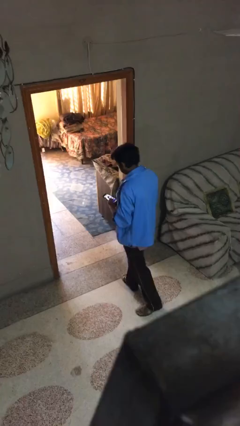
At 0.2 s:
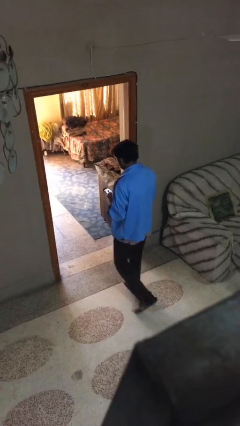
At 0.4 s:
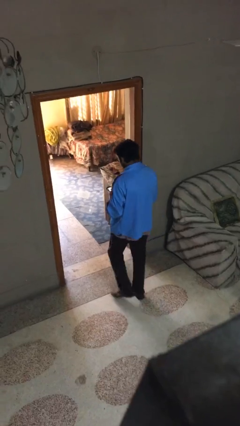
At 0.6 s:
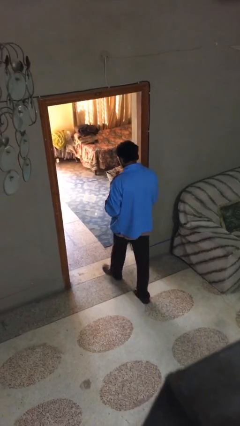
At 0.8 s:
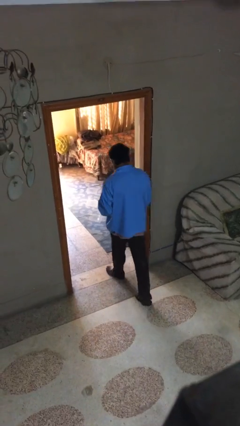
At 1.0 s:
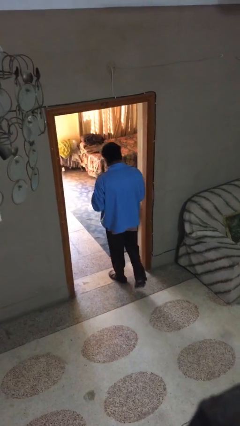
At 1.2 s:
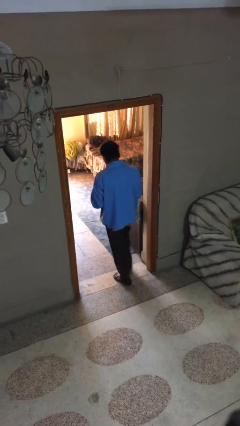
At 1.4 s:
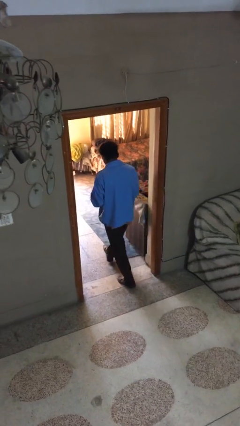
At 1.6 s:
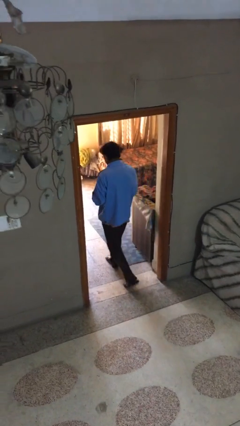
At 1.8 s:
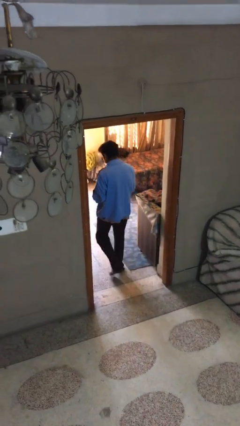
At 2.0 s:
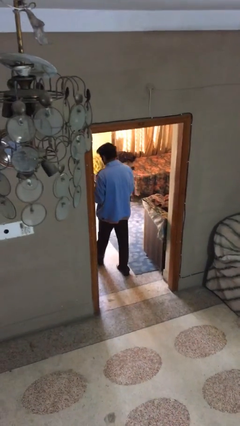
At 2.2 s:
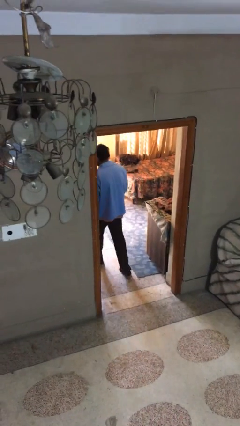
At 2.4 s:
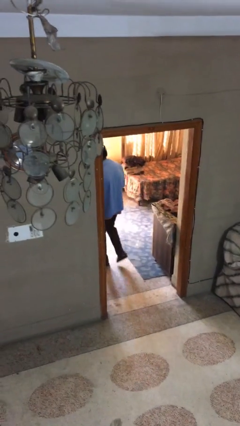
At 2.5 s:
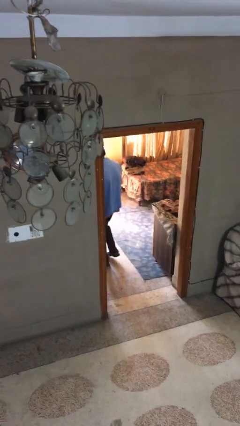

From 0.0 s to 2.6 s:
person exits scene through structure

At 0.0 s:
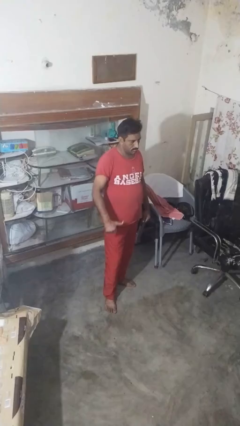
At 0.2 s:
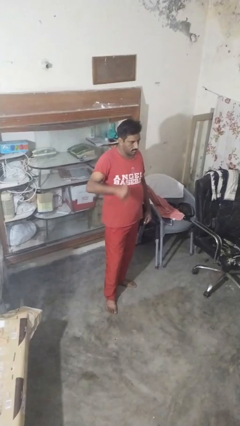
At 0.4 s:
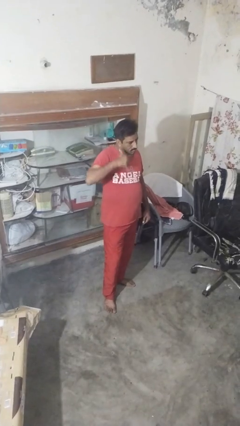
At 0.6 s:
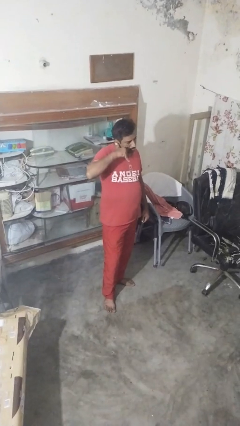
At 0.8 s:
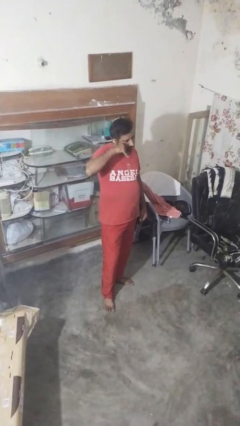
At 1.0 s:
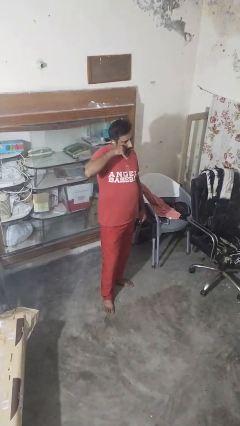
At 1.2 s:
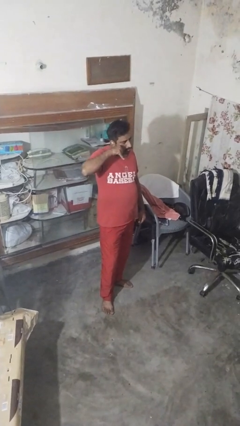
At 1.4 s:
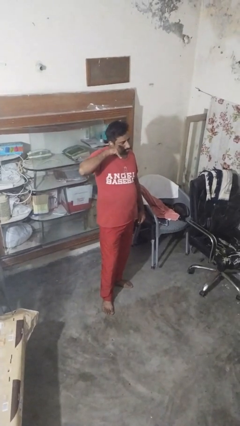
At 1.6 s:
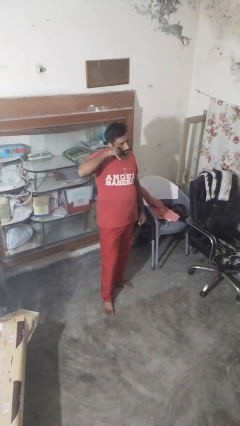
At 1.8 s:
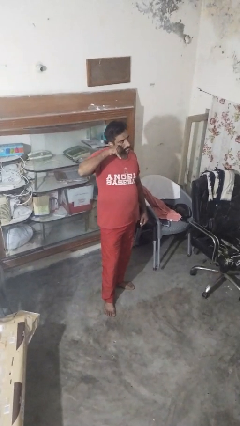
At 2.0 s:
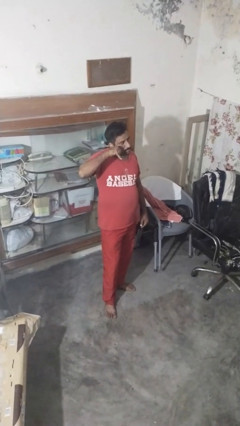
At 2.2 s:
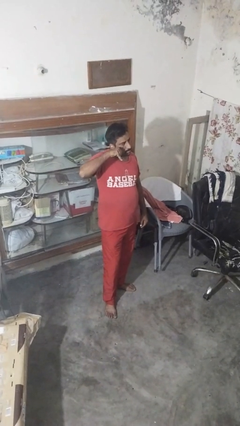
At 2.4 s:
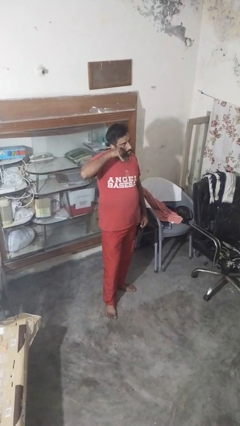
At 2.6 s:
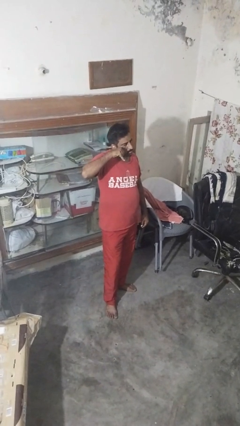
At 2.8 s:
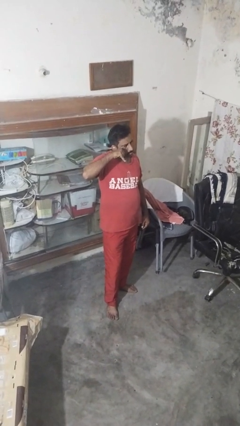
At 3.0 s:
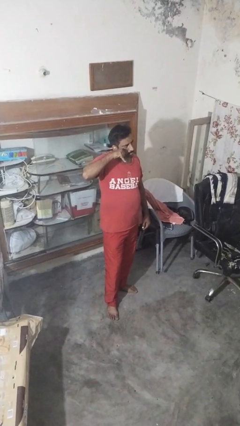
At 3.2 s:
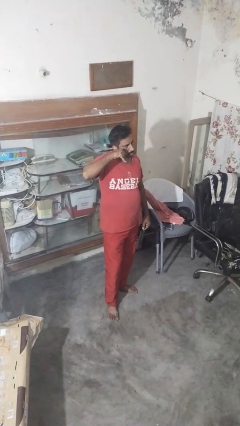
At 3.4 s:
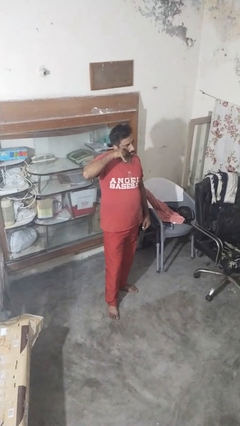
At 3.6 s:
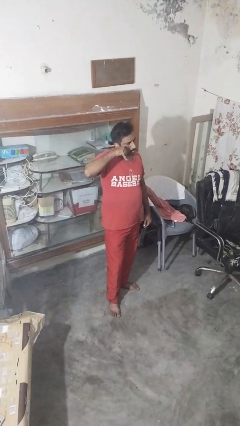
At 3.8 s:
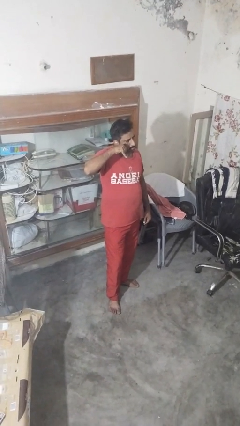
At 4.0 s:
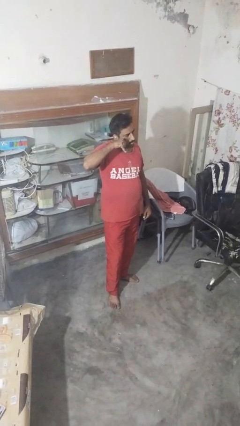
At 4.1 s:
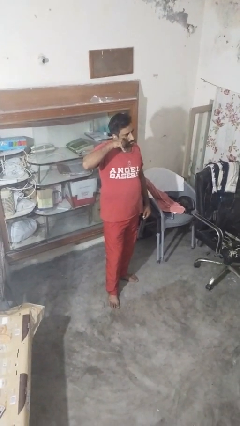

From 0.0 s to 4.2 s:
person gestures call me

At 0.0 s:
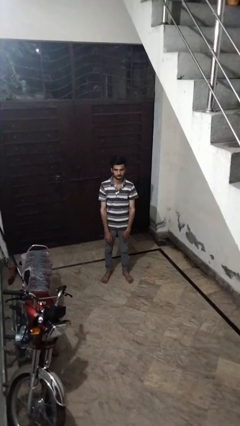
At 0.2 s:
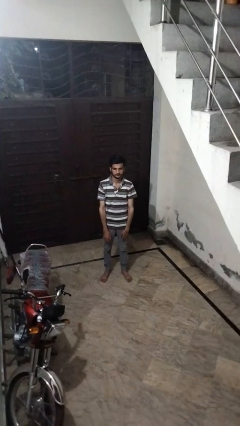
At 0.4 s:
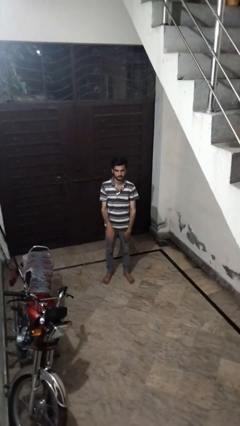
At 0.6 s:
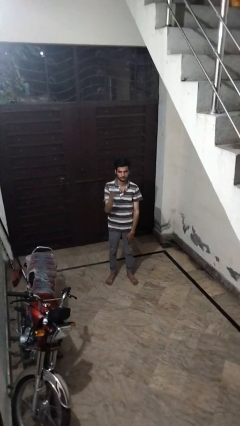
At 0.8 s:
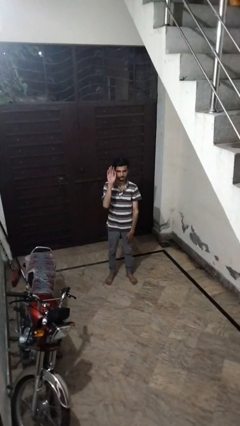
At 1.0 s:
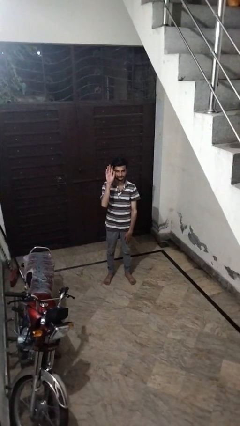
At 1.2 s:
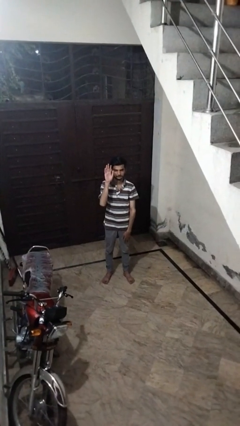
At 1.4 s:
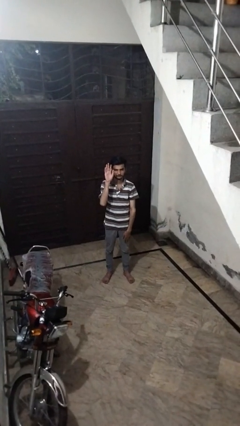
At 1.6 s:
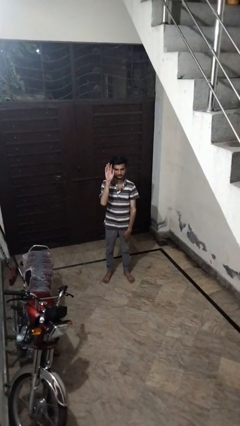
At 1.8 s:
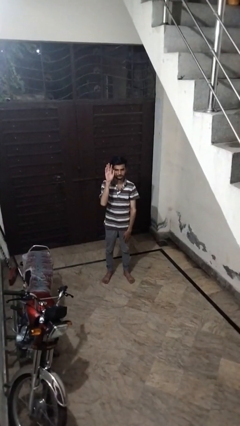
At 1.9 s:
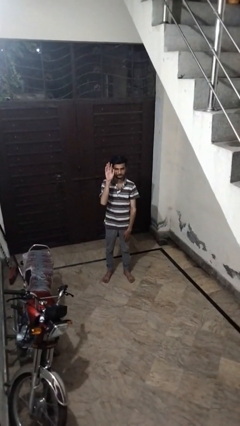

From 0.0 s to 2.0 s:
person gestures raise hand

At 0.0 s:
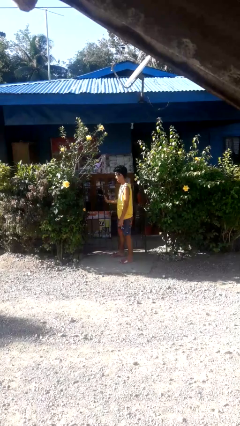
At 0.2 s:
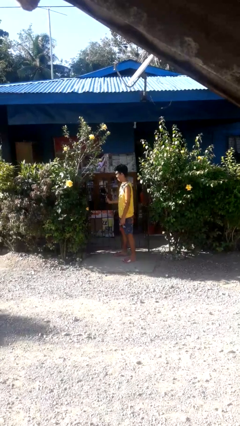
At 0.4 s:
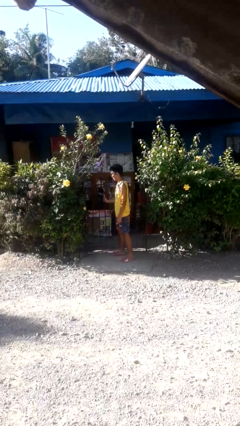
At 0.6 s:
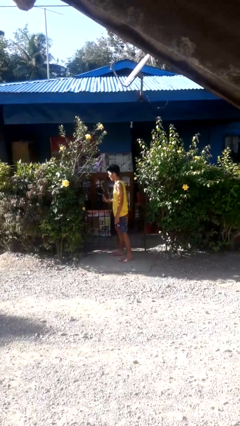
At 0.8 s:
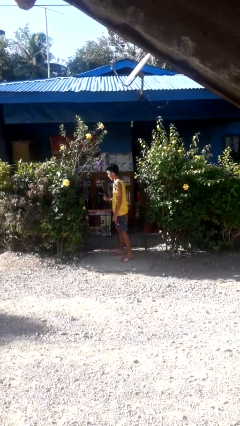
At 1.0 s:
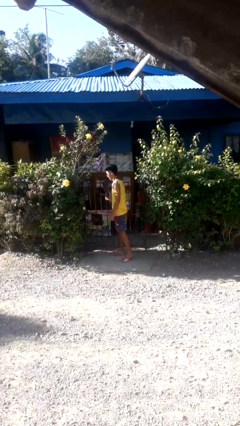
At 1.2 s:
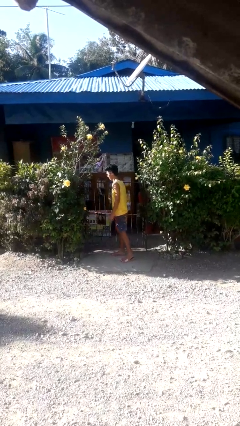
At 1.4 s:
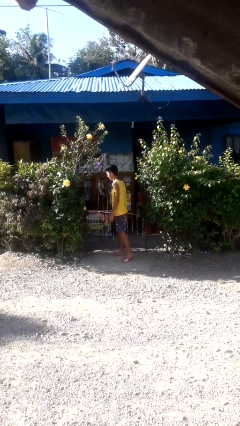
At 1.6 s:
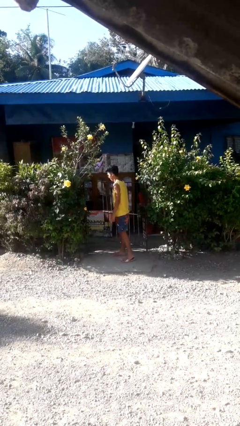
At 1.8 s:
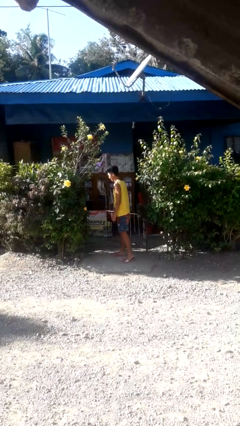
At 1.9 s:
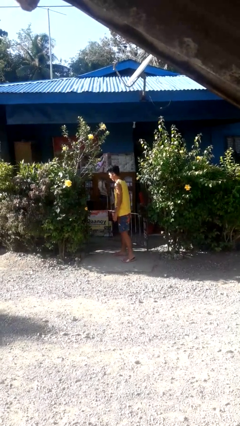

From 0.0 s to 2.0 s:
person opens gate

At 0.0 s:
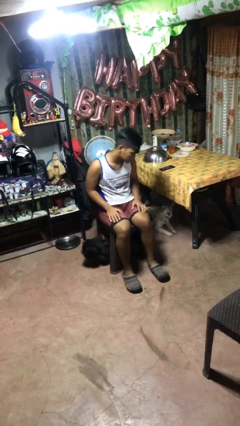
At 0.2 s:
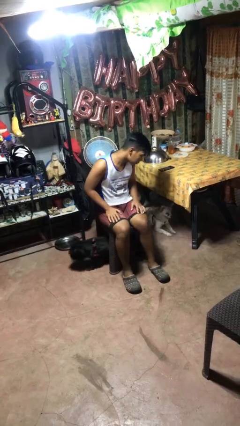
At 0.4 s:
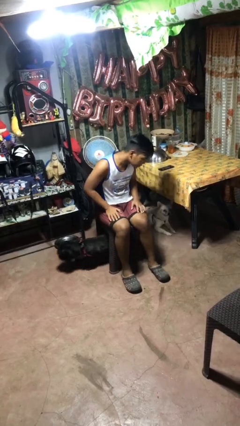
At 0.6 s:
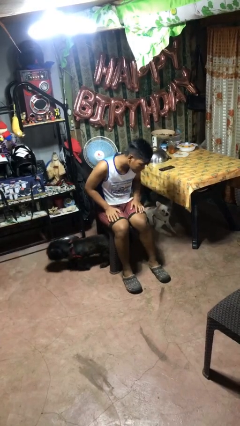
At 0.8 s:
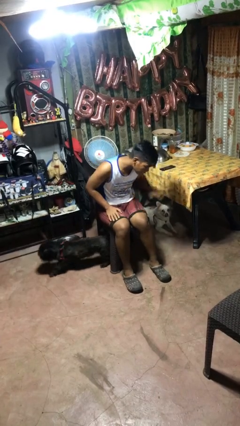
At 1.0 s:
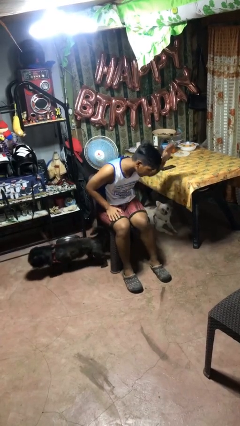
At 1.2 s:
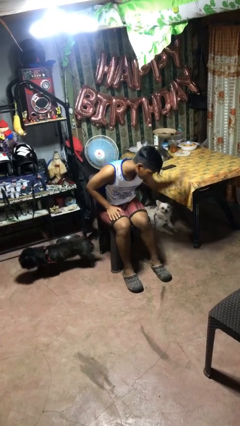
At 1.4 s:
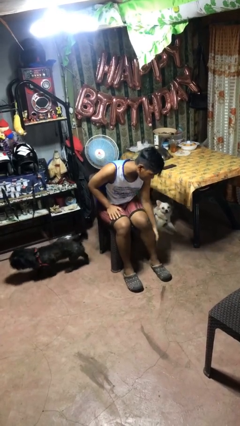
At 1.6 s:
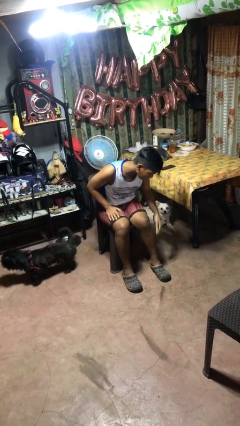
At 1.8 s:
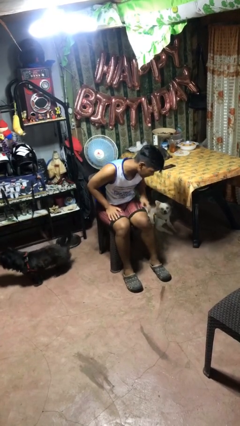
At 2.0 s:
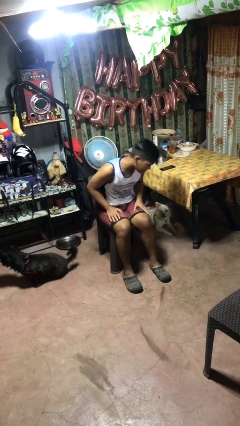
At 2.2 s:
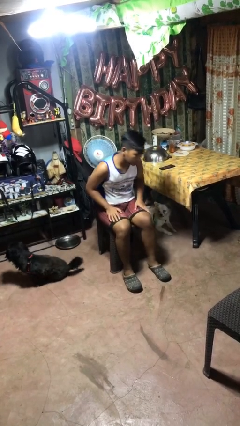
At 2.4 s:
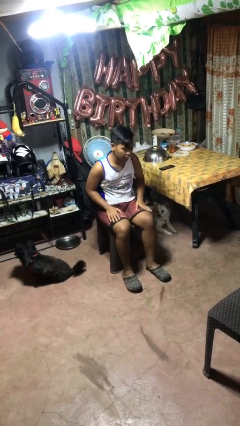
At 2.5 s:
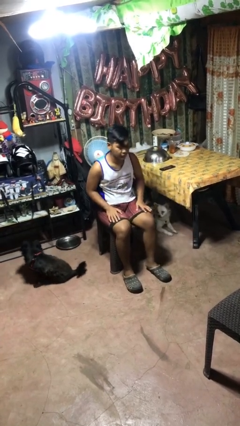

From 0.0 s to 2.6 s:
person swats bug

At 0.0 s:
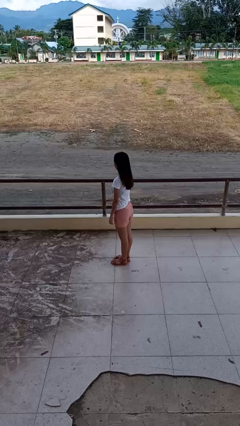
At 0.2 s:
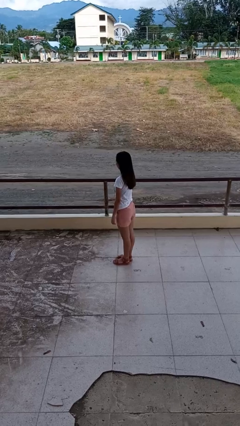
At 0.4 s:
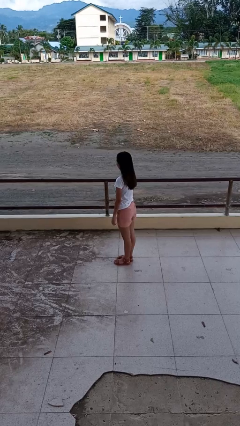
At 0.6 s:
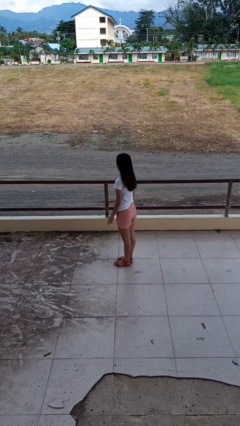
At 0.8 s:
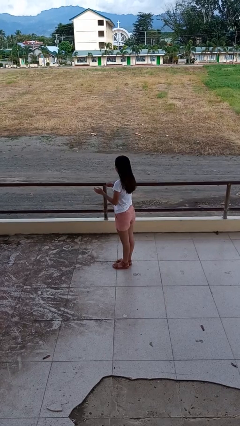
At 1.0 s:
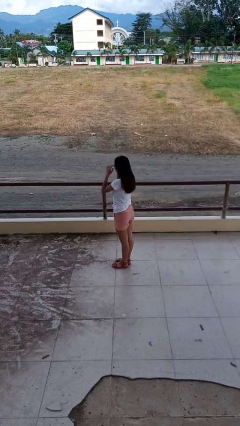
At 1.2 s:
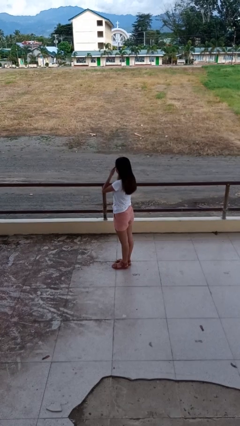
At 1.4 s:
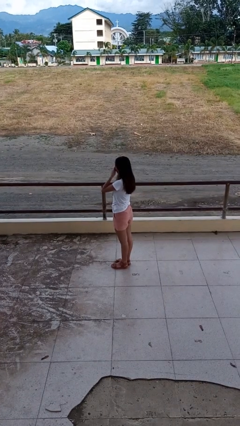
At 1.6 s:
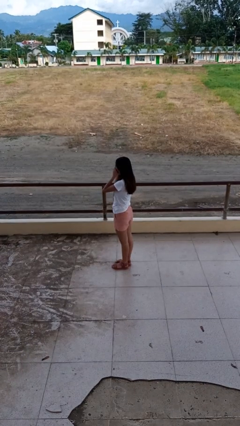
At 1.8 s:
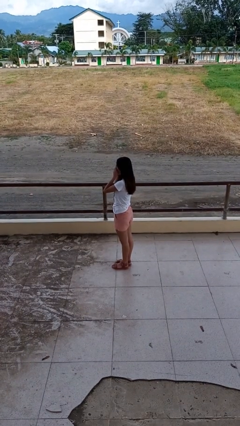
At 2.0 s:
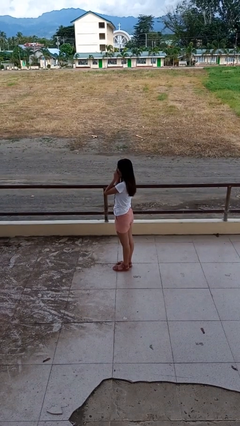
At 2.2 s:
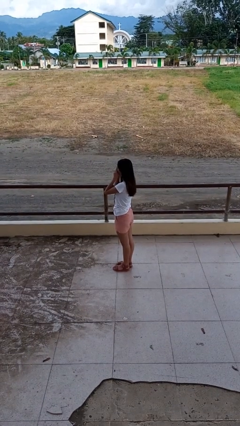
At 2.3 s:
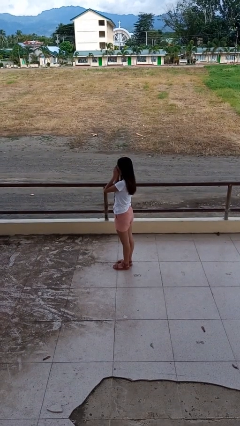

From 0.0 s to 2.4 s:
person rubs eyes

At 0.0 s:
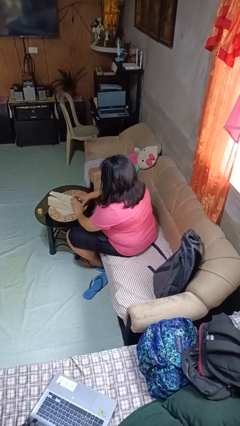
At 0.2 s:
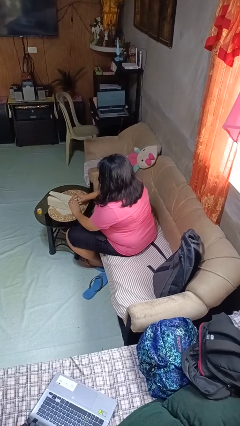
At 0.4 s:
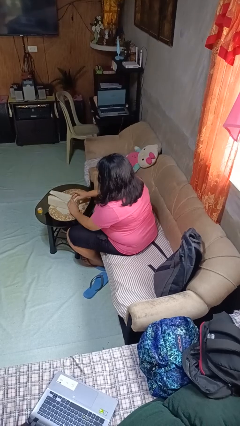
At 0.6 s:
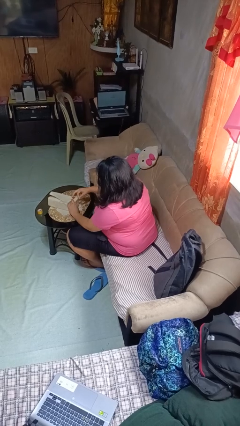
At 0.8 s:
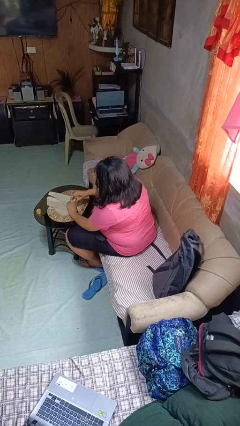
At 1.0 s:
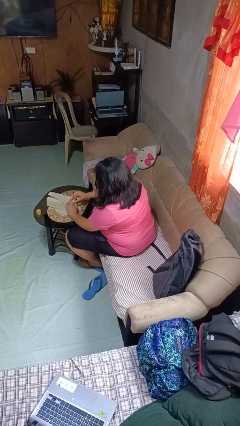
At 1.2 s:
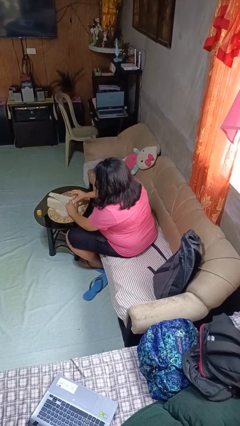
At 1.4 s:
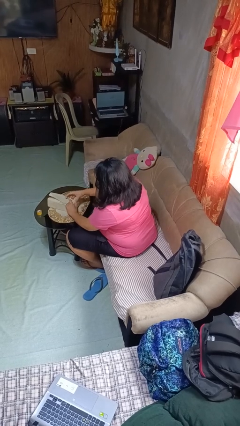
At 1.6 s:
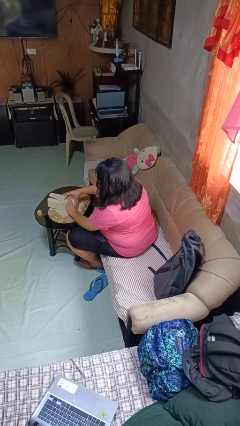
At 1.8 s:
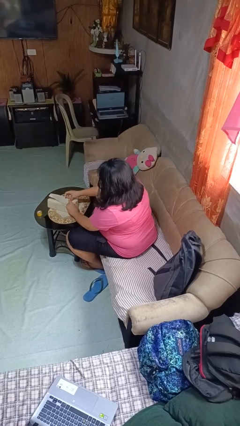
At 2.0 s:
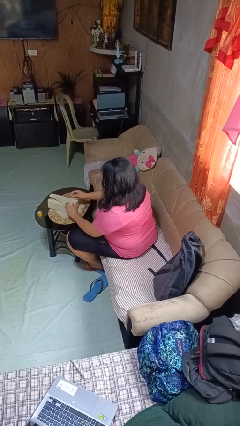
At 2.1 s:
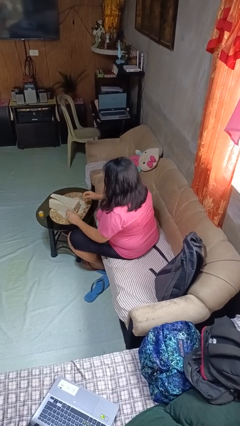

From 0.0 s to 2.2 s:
person wraps box
